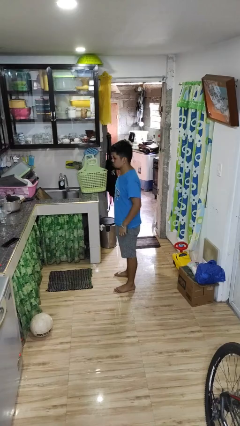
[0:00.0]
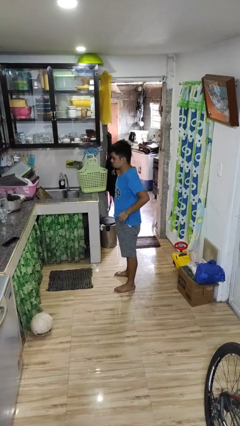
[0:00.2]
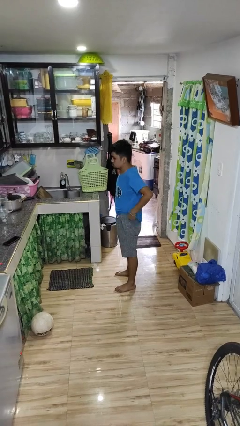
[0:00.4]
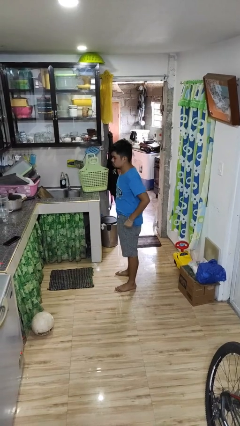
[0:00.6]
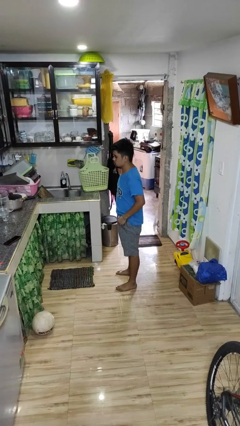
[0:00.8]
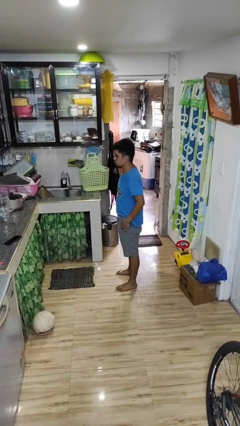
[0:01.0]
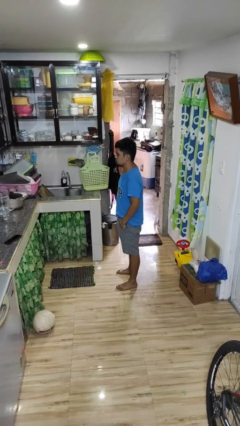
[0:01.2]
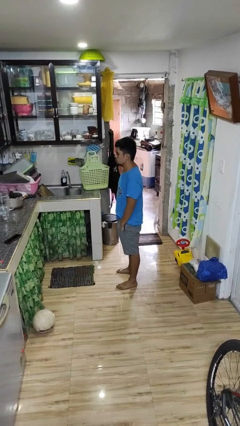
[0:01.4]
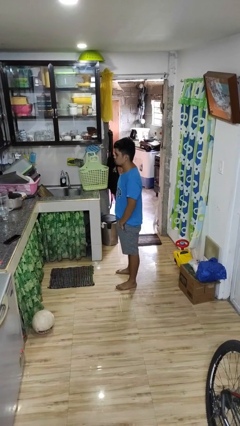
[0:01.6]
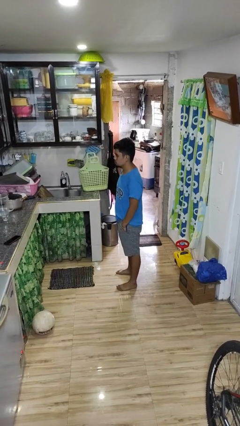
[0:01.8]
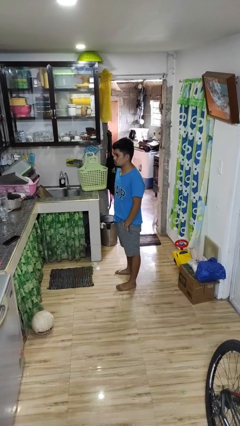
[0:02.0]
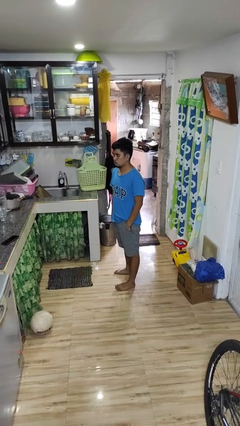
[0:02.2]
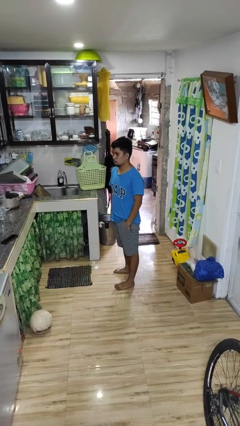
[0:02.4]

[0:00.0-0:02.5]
person puts hands in back pockets

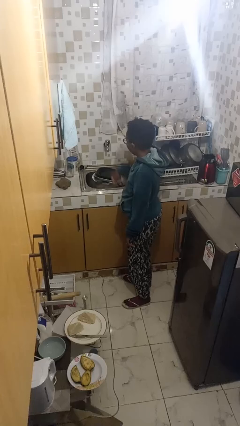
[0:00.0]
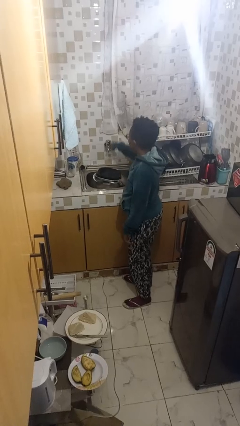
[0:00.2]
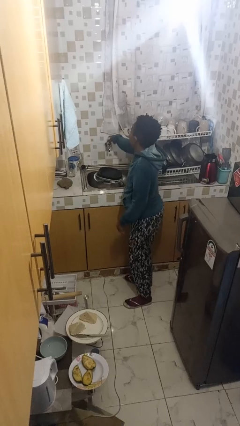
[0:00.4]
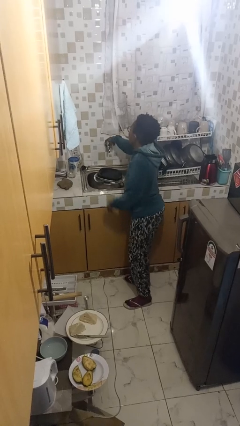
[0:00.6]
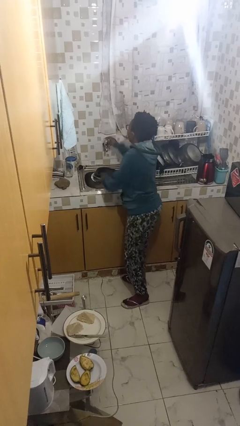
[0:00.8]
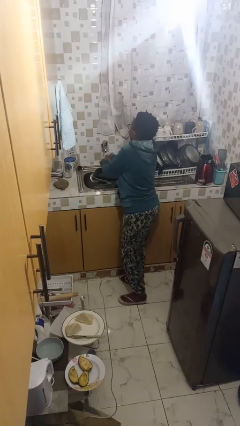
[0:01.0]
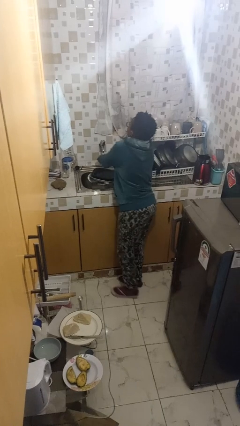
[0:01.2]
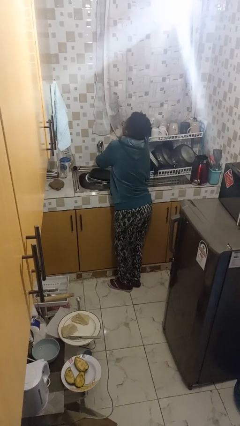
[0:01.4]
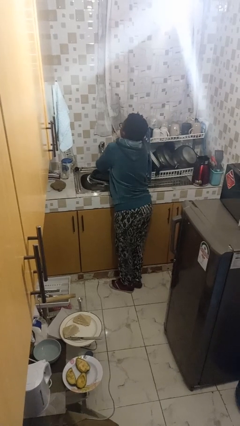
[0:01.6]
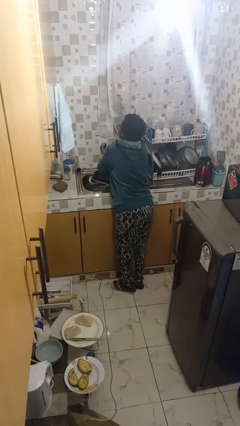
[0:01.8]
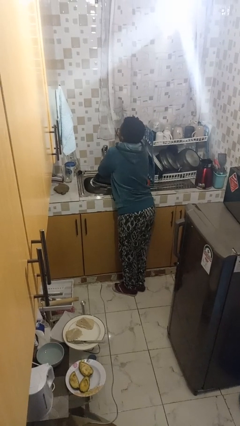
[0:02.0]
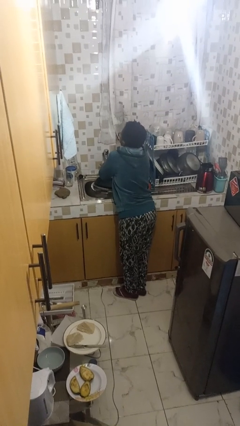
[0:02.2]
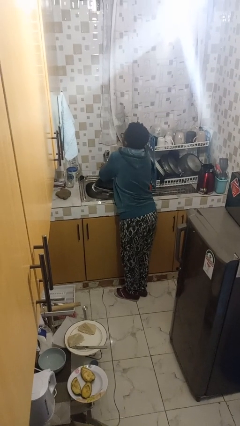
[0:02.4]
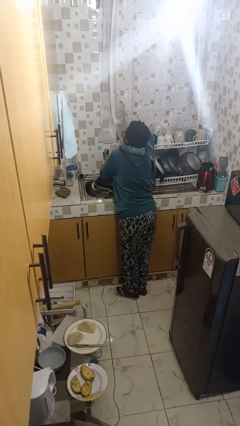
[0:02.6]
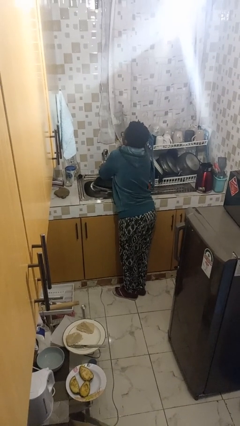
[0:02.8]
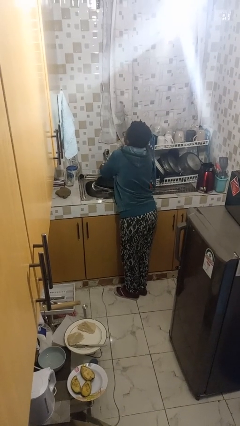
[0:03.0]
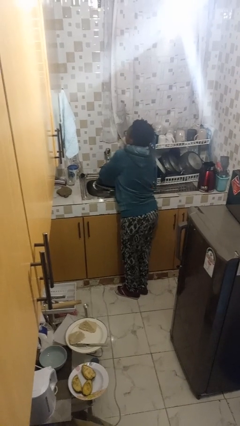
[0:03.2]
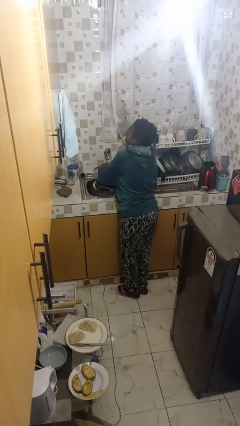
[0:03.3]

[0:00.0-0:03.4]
person washes hands

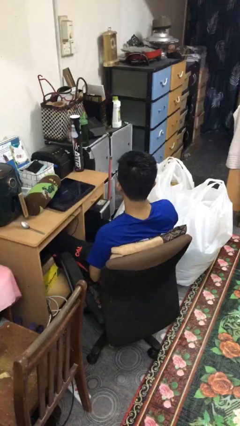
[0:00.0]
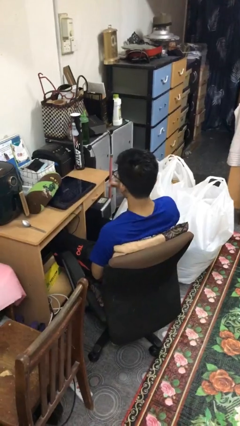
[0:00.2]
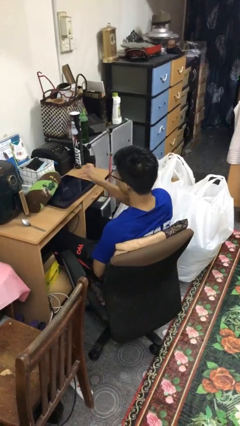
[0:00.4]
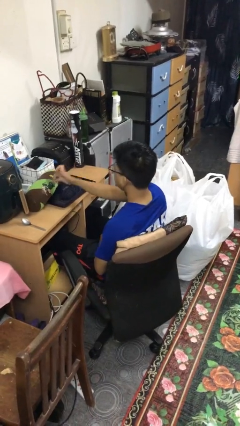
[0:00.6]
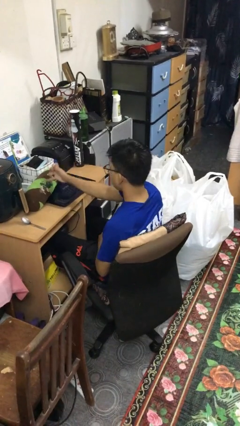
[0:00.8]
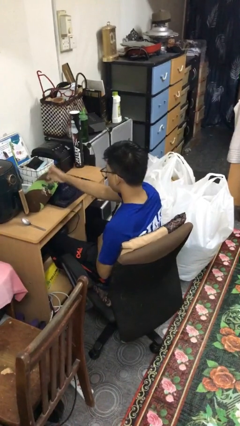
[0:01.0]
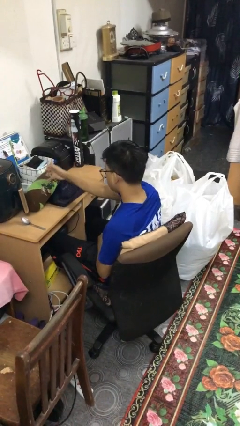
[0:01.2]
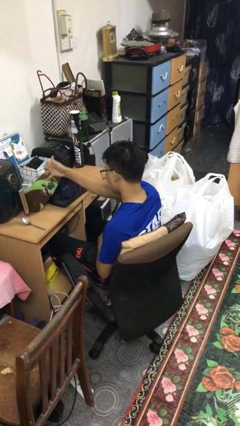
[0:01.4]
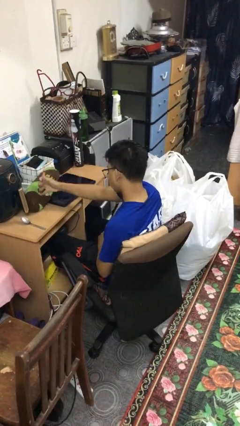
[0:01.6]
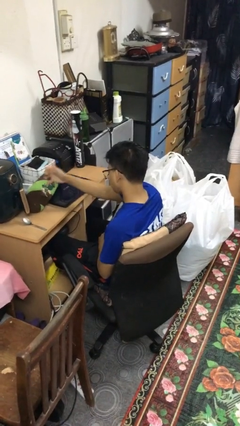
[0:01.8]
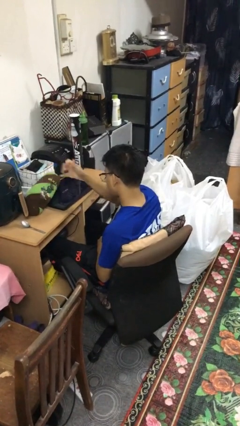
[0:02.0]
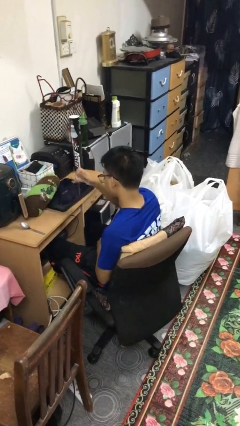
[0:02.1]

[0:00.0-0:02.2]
person taps object with finger

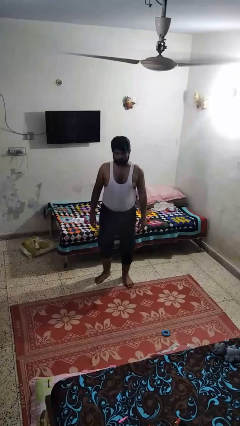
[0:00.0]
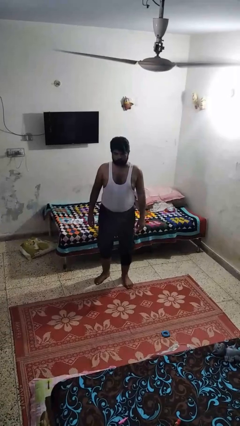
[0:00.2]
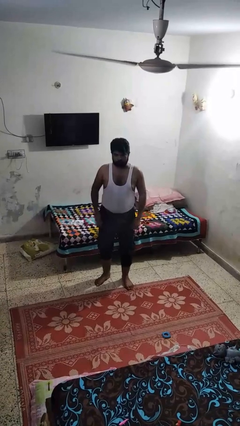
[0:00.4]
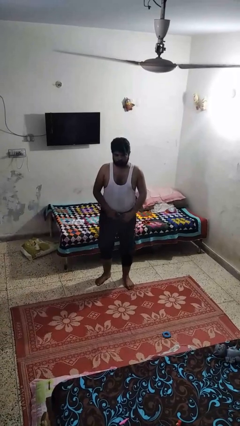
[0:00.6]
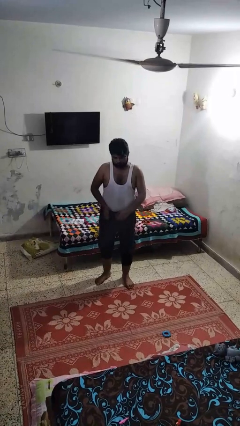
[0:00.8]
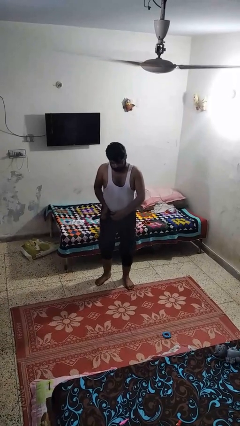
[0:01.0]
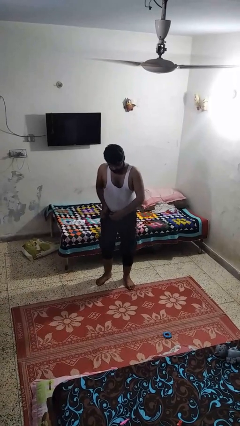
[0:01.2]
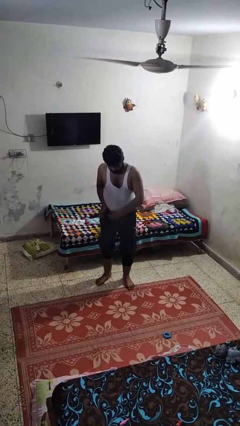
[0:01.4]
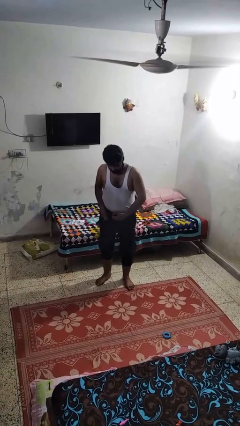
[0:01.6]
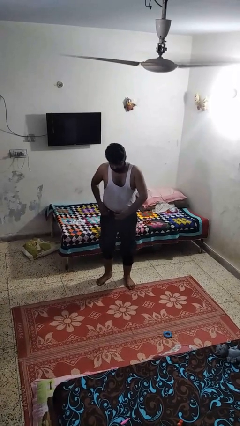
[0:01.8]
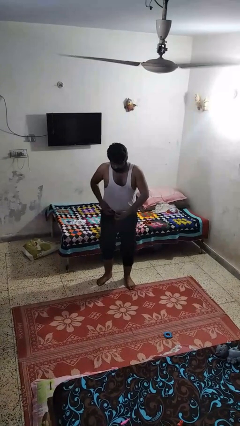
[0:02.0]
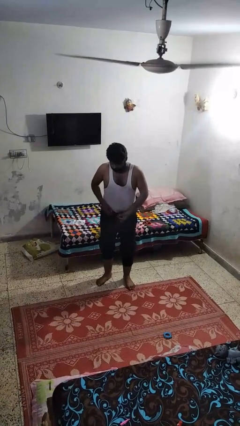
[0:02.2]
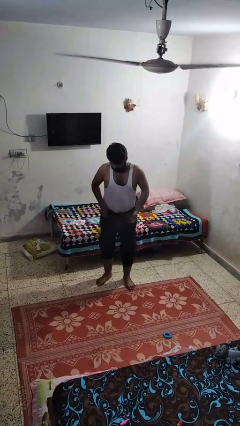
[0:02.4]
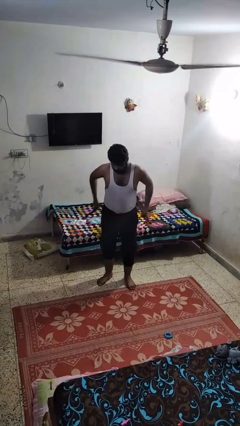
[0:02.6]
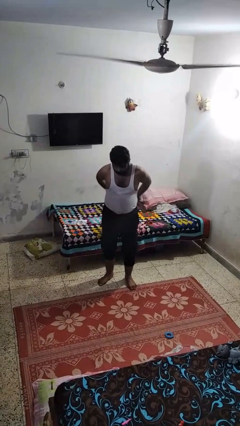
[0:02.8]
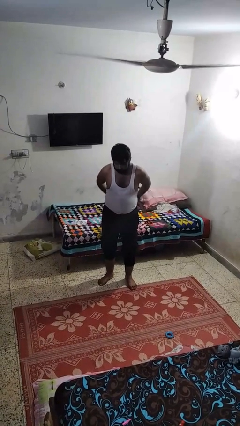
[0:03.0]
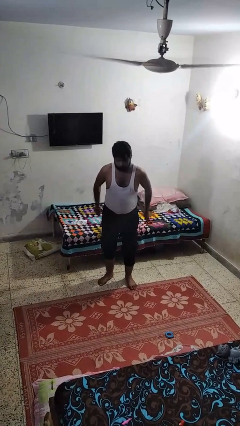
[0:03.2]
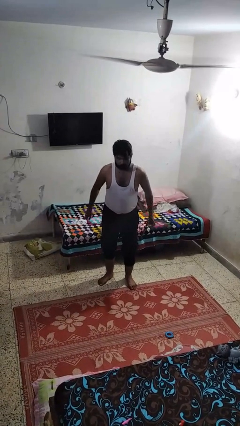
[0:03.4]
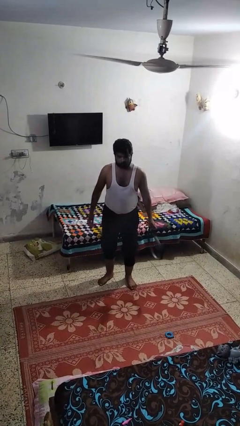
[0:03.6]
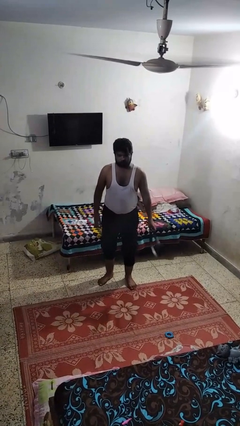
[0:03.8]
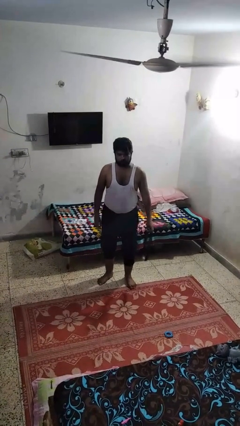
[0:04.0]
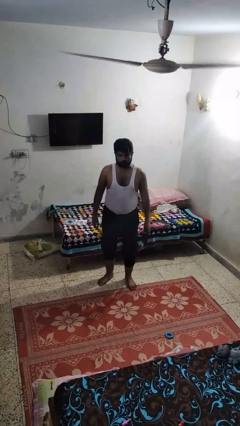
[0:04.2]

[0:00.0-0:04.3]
person takes off belt

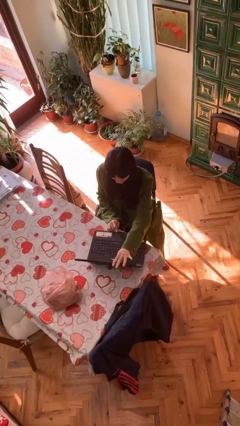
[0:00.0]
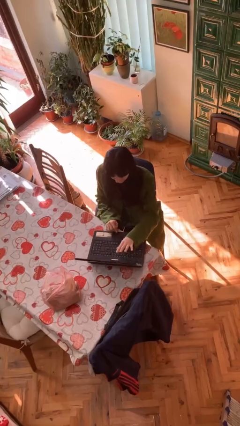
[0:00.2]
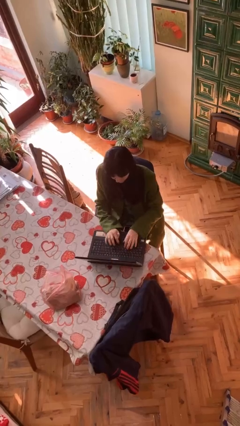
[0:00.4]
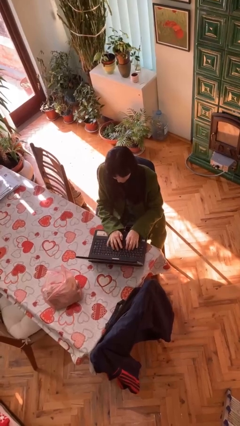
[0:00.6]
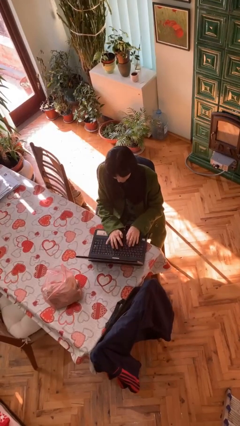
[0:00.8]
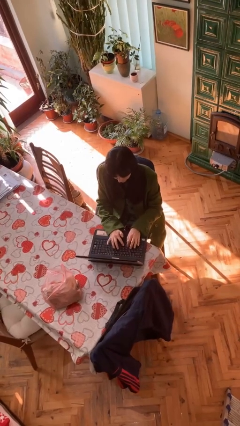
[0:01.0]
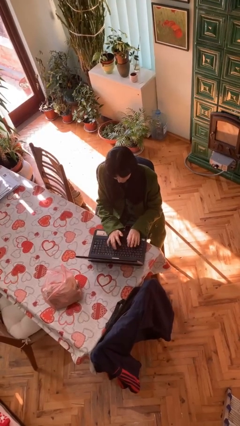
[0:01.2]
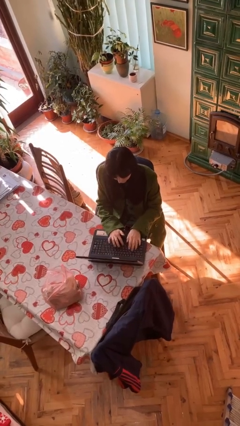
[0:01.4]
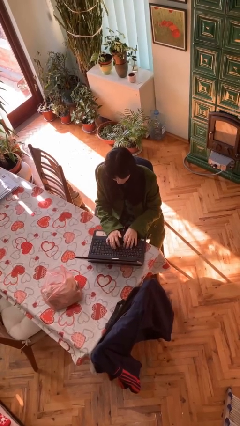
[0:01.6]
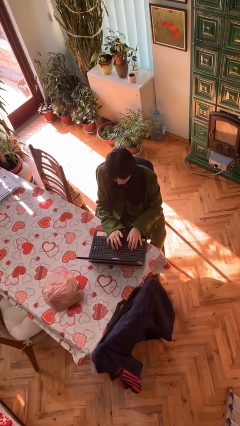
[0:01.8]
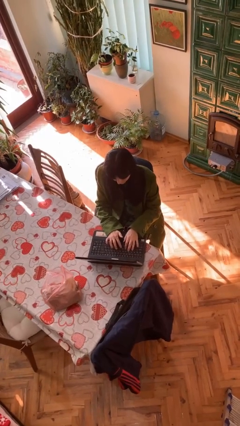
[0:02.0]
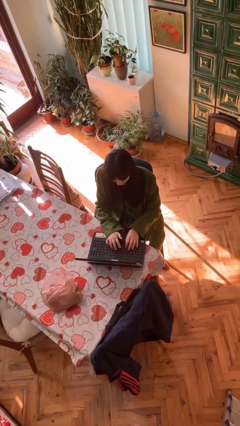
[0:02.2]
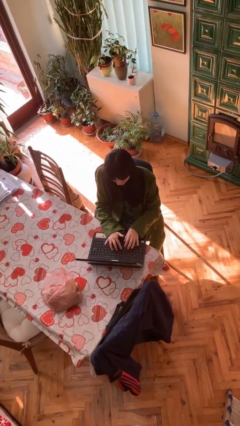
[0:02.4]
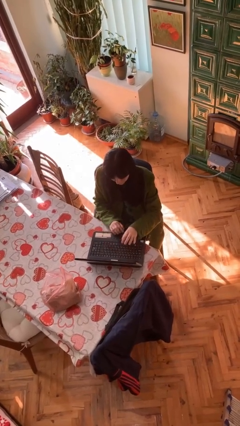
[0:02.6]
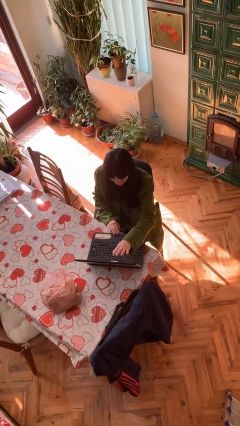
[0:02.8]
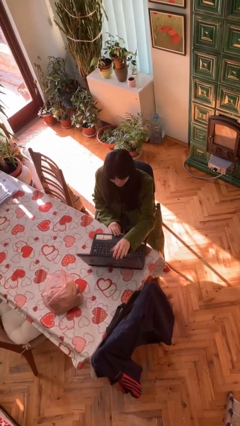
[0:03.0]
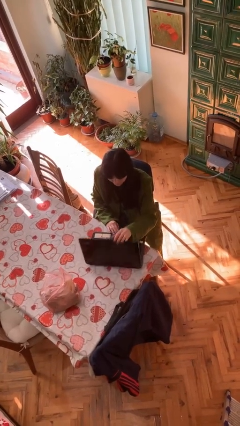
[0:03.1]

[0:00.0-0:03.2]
person interacts with laptop

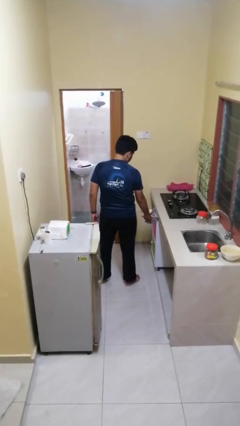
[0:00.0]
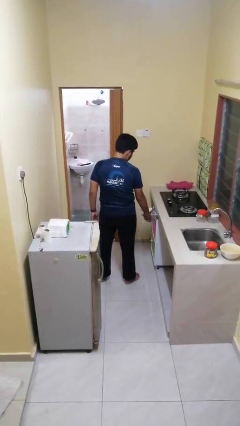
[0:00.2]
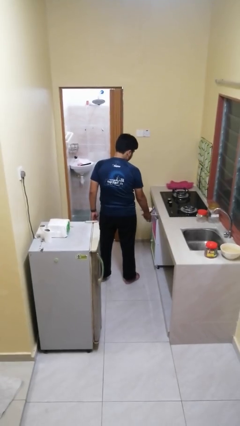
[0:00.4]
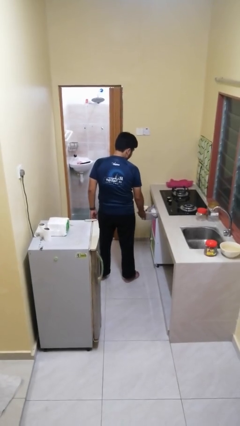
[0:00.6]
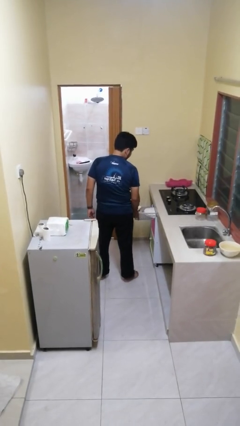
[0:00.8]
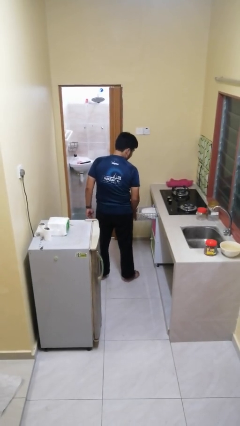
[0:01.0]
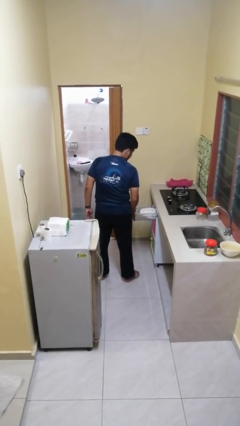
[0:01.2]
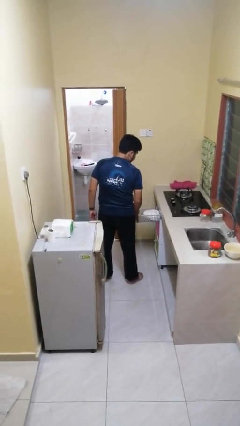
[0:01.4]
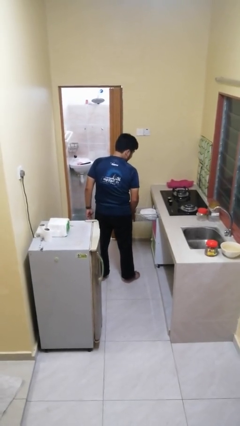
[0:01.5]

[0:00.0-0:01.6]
person opens kitchen drawer

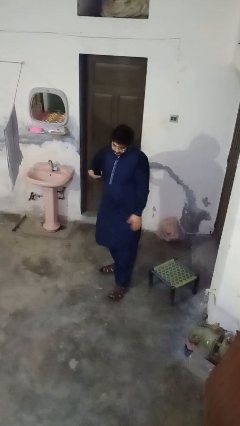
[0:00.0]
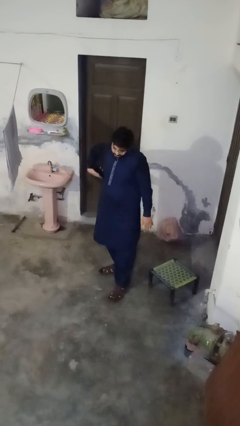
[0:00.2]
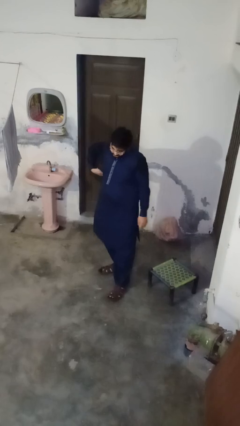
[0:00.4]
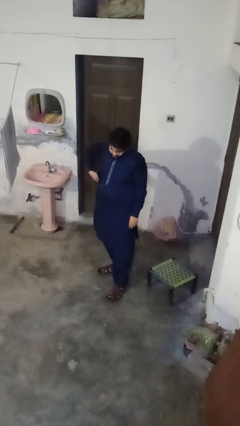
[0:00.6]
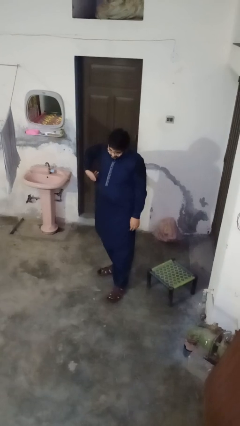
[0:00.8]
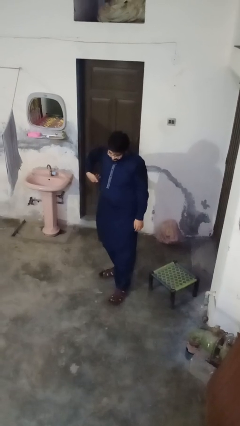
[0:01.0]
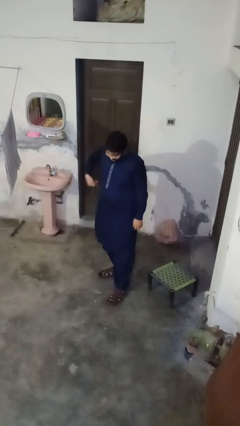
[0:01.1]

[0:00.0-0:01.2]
person puts phone into pocket
